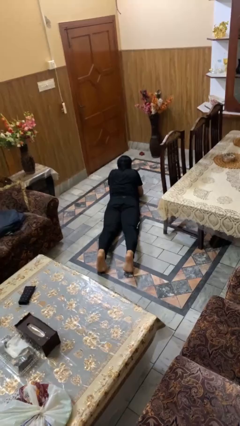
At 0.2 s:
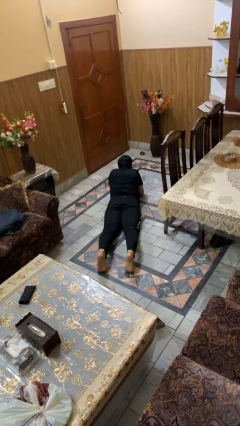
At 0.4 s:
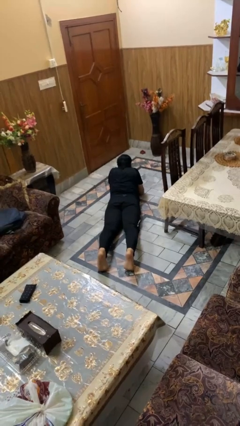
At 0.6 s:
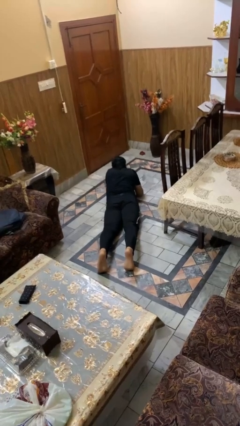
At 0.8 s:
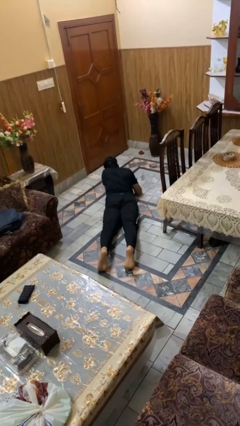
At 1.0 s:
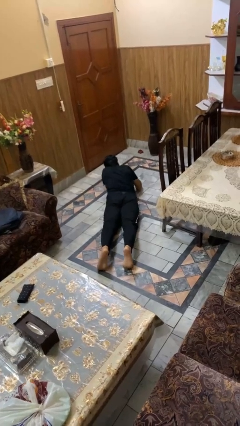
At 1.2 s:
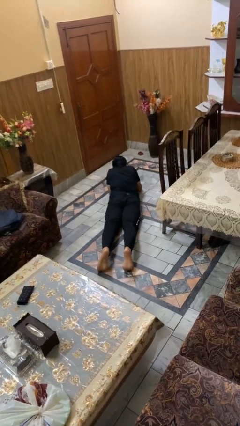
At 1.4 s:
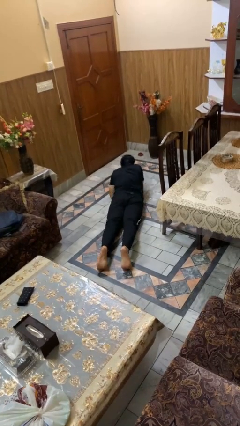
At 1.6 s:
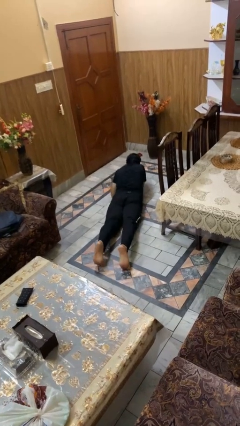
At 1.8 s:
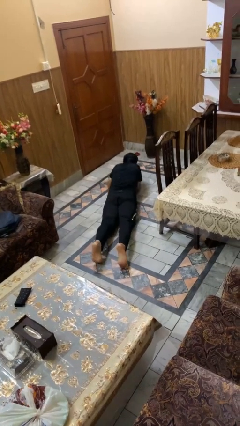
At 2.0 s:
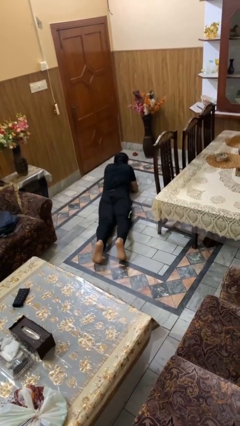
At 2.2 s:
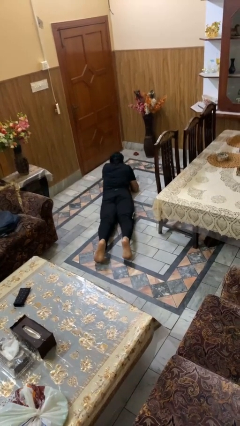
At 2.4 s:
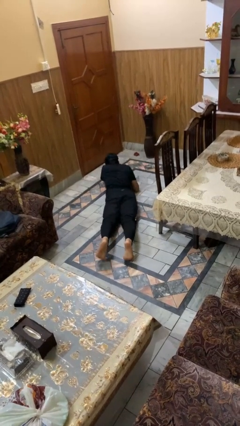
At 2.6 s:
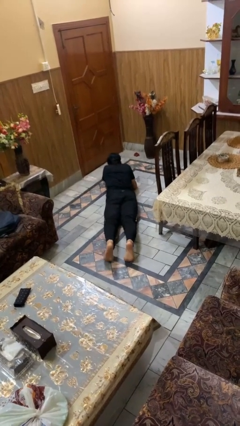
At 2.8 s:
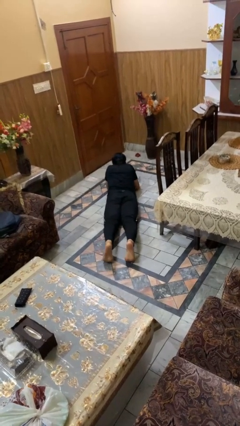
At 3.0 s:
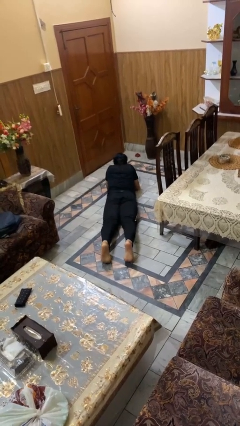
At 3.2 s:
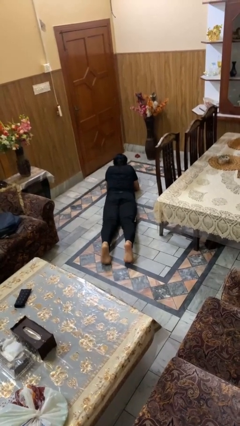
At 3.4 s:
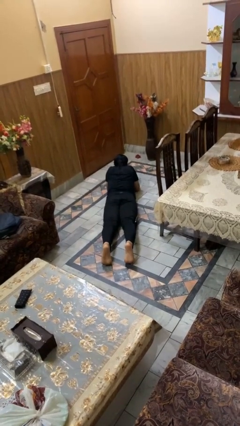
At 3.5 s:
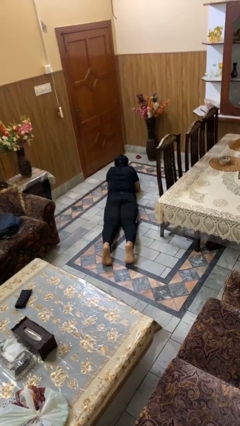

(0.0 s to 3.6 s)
person crawls

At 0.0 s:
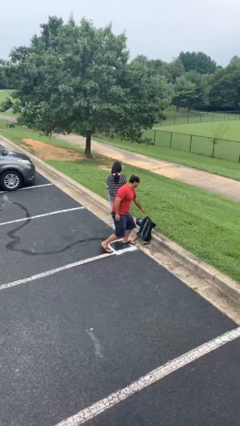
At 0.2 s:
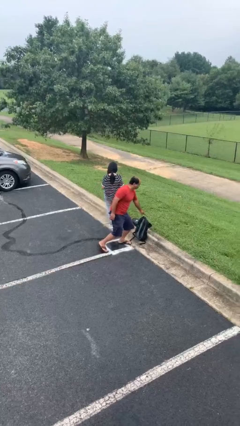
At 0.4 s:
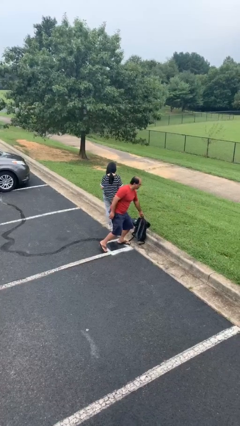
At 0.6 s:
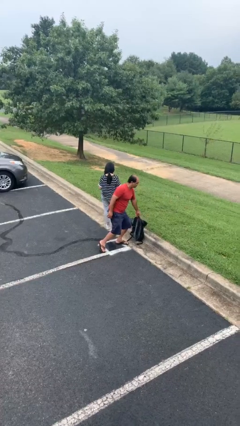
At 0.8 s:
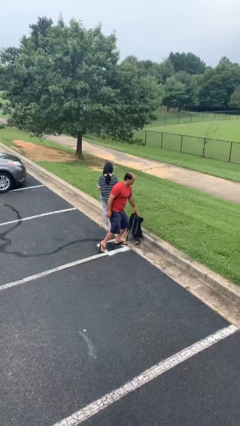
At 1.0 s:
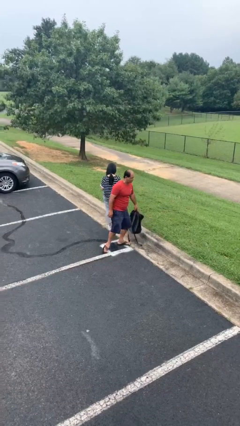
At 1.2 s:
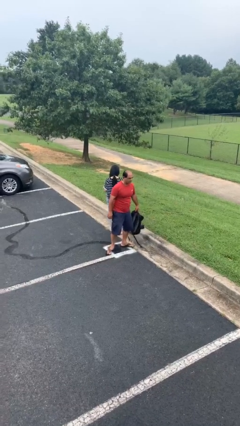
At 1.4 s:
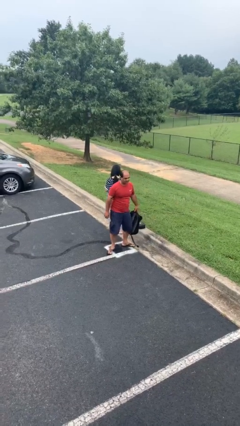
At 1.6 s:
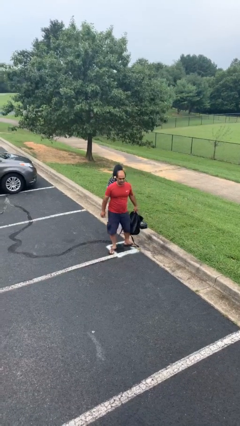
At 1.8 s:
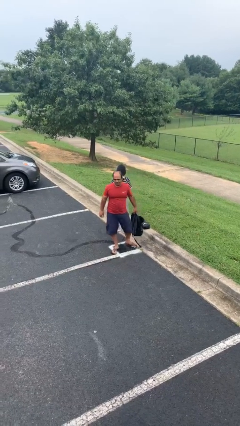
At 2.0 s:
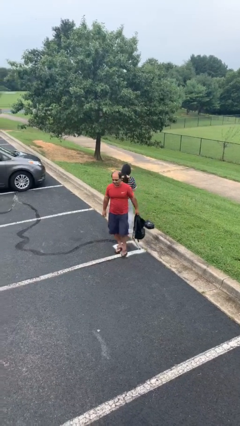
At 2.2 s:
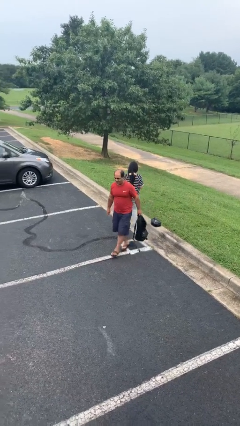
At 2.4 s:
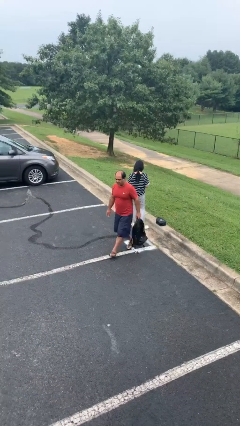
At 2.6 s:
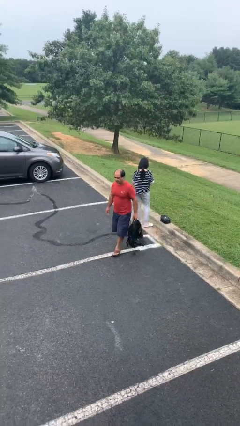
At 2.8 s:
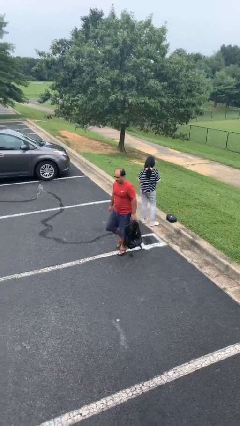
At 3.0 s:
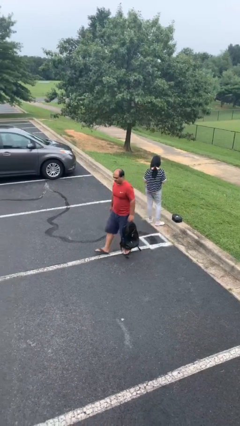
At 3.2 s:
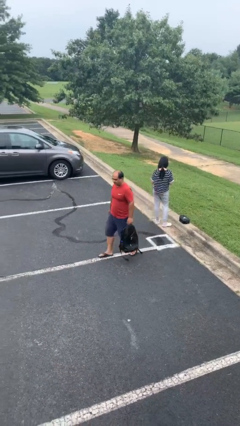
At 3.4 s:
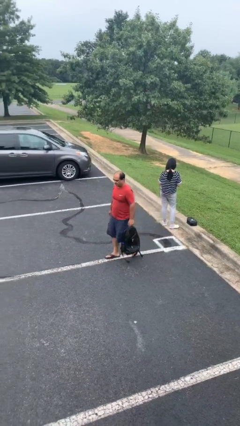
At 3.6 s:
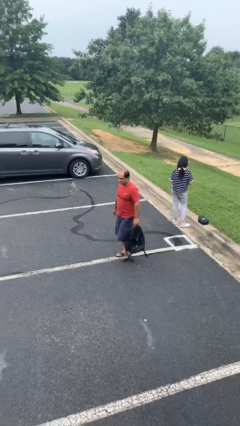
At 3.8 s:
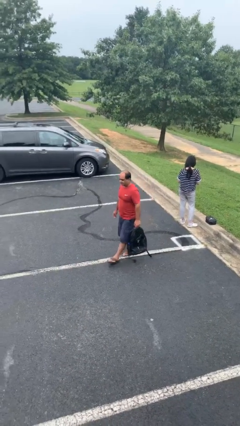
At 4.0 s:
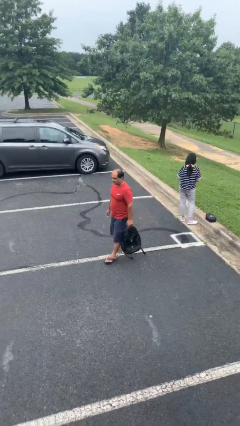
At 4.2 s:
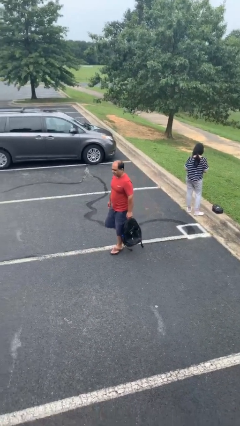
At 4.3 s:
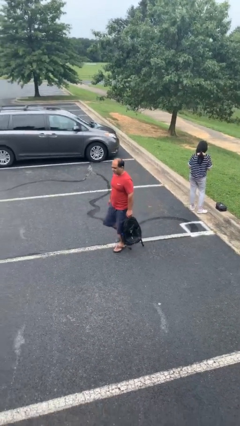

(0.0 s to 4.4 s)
person steals object from person

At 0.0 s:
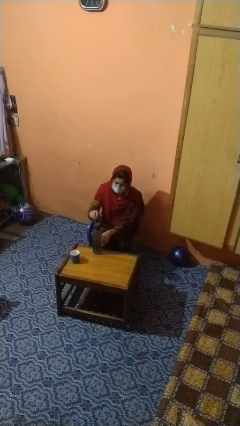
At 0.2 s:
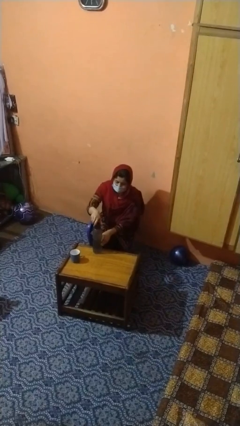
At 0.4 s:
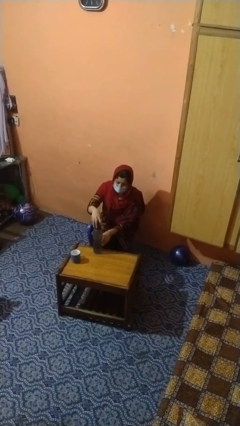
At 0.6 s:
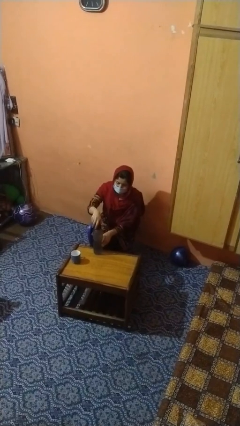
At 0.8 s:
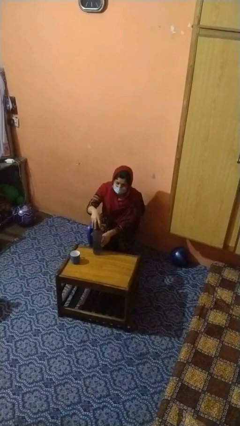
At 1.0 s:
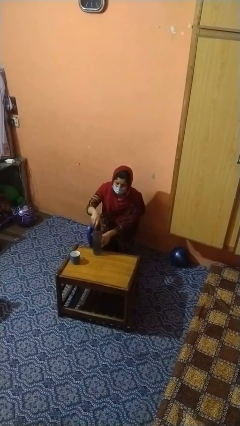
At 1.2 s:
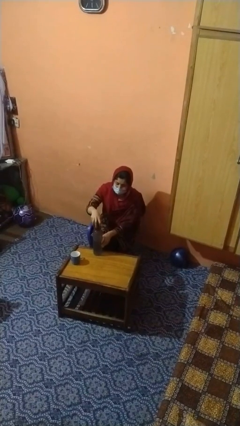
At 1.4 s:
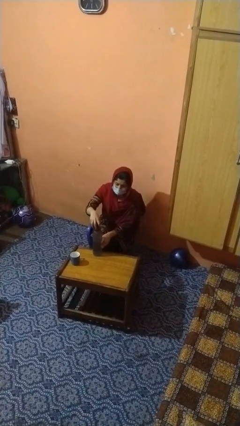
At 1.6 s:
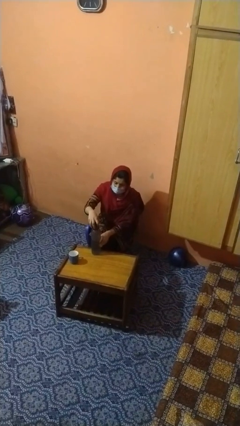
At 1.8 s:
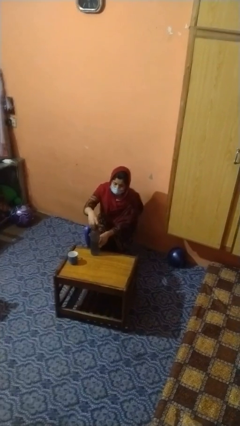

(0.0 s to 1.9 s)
person unscrews lid from bottle

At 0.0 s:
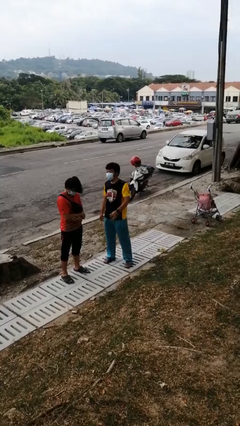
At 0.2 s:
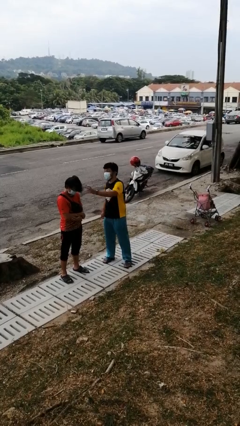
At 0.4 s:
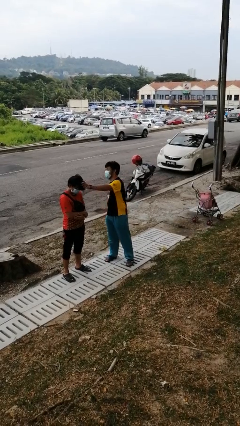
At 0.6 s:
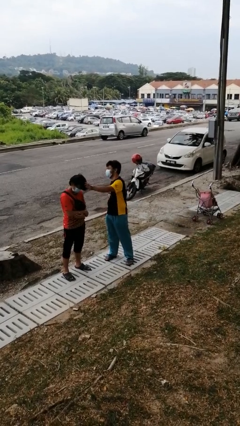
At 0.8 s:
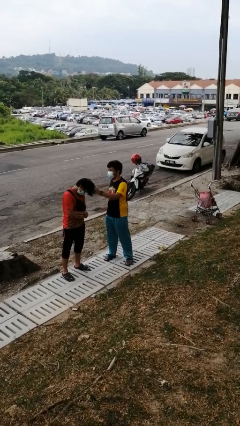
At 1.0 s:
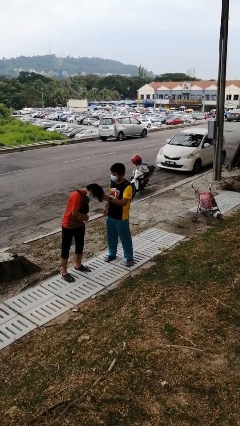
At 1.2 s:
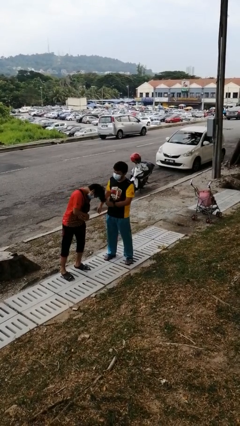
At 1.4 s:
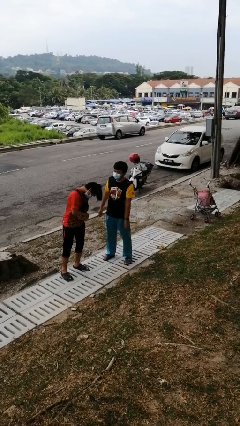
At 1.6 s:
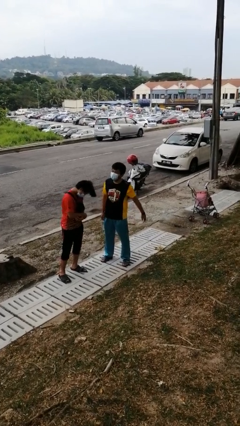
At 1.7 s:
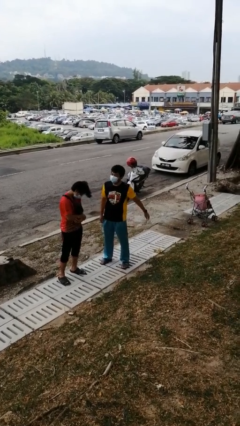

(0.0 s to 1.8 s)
person grabs person by hair

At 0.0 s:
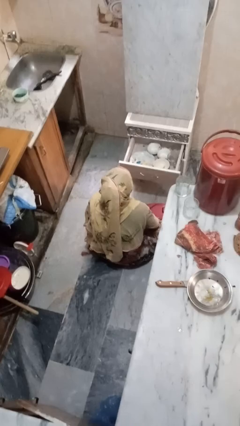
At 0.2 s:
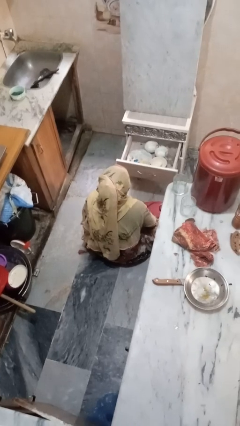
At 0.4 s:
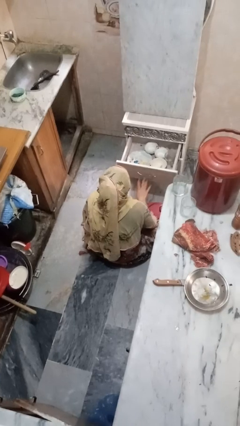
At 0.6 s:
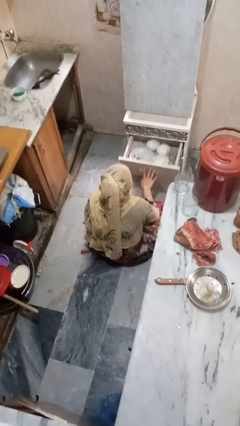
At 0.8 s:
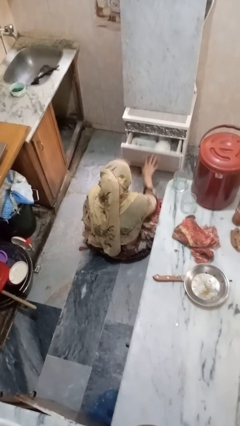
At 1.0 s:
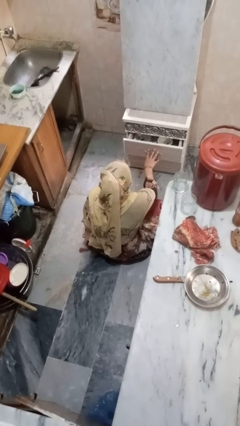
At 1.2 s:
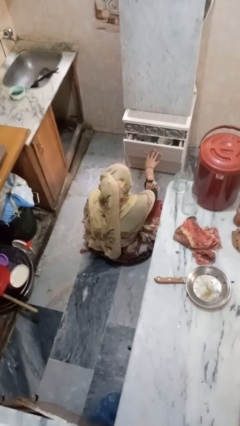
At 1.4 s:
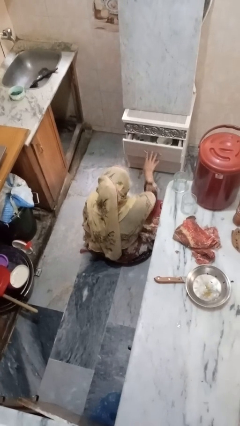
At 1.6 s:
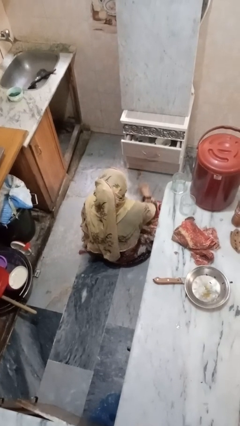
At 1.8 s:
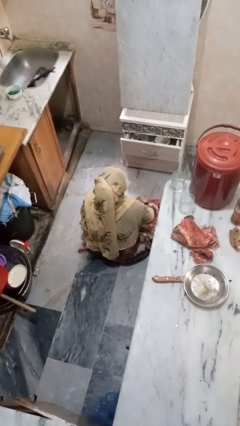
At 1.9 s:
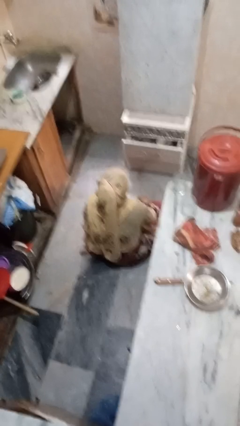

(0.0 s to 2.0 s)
person closes kitchen drawer

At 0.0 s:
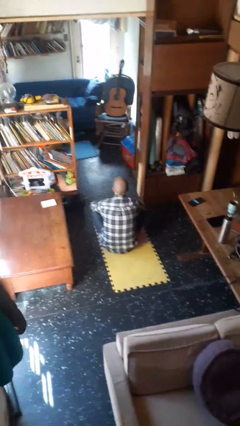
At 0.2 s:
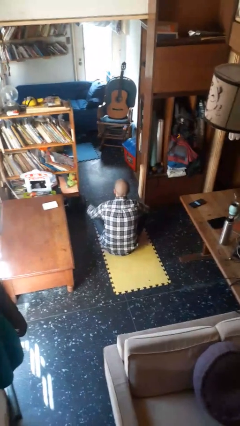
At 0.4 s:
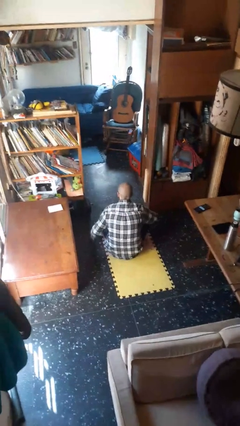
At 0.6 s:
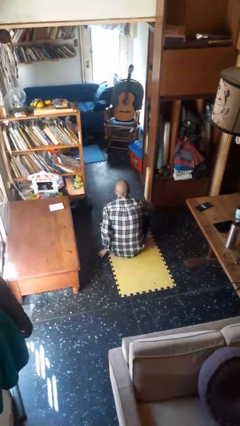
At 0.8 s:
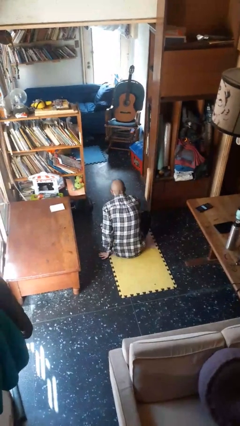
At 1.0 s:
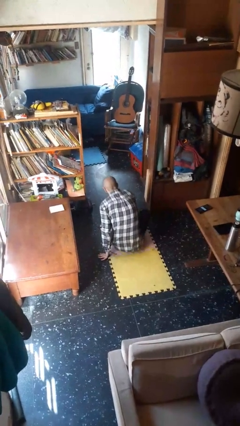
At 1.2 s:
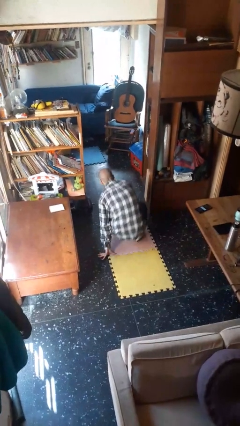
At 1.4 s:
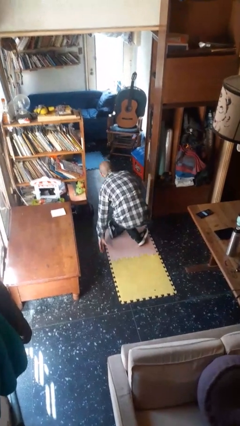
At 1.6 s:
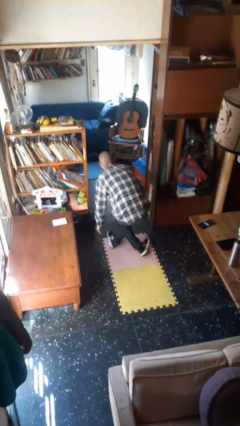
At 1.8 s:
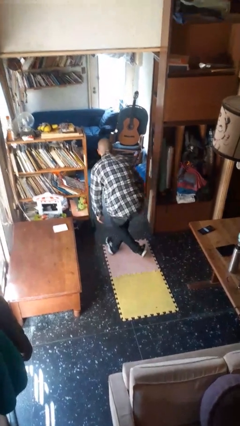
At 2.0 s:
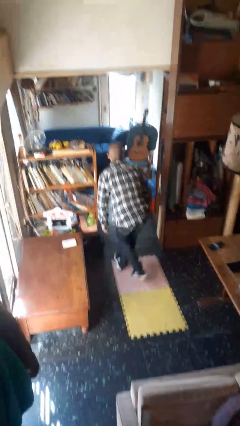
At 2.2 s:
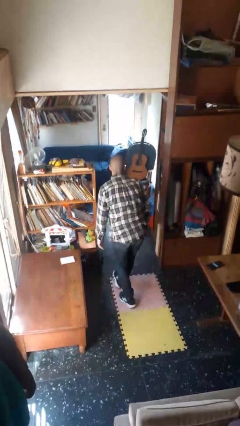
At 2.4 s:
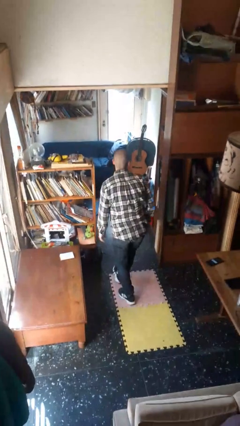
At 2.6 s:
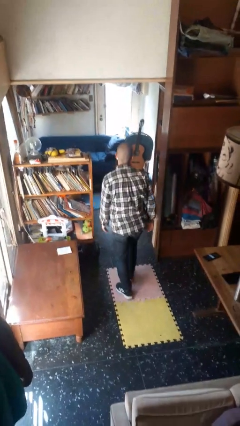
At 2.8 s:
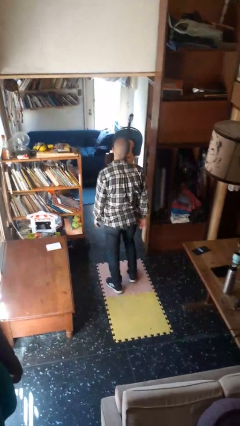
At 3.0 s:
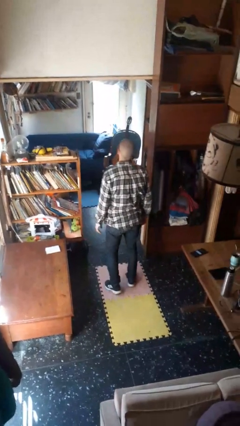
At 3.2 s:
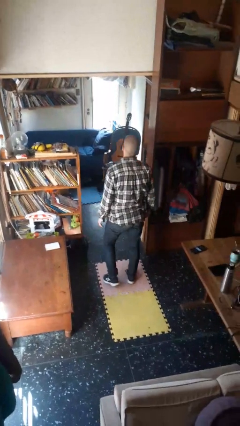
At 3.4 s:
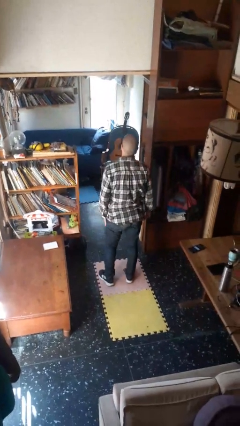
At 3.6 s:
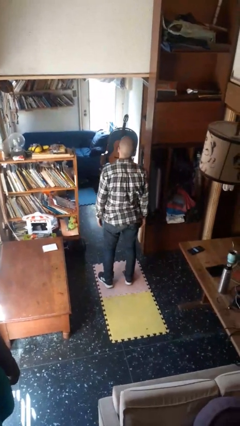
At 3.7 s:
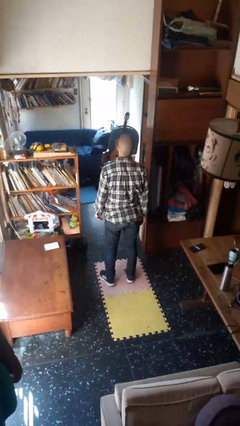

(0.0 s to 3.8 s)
person stands up from floor
